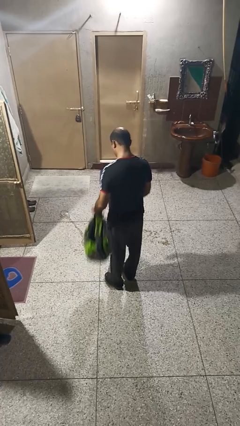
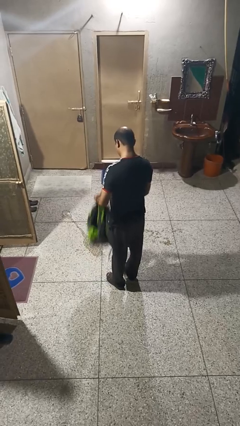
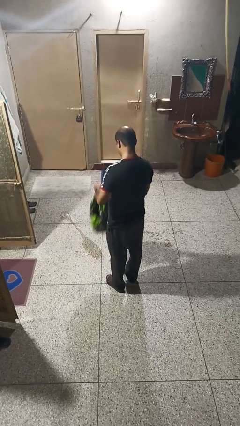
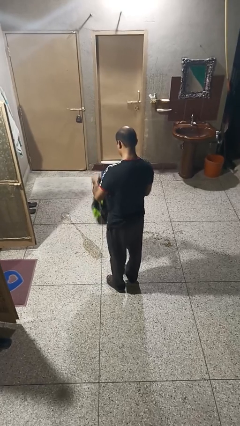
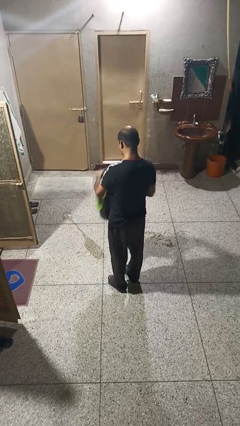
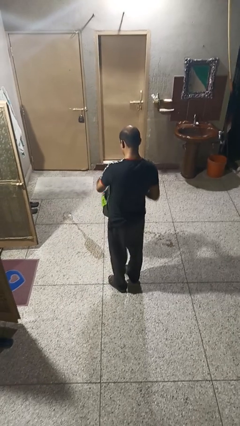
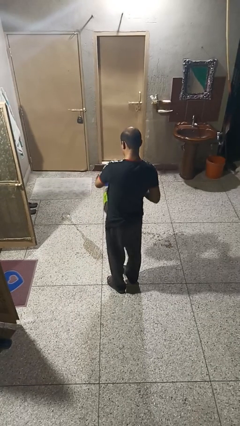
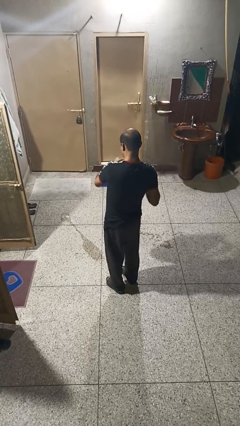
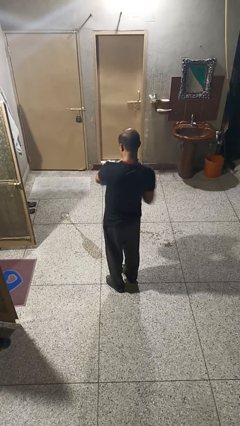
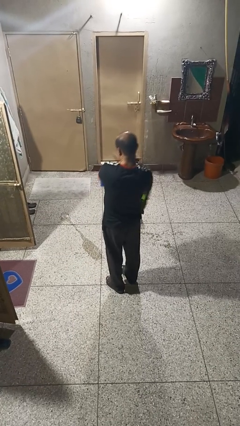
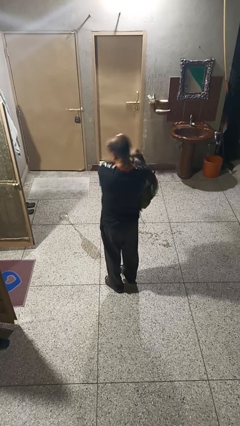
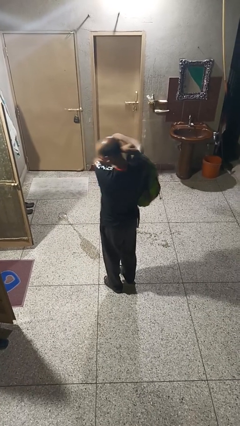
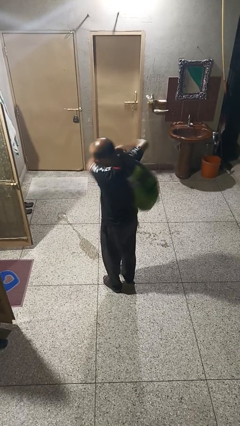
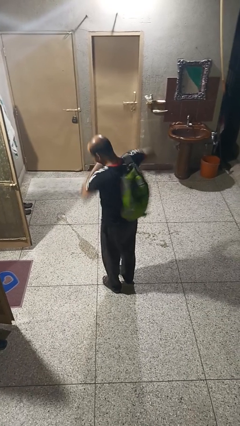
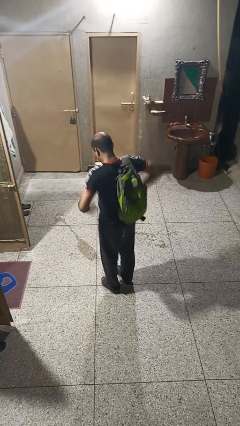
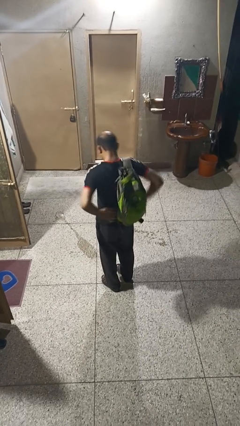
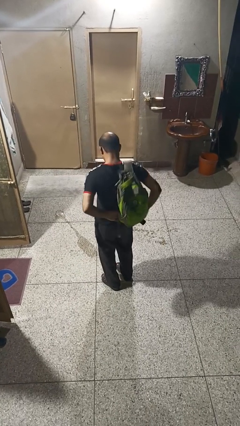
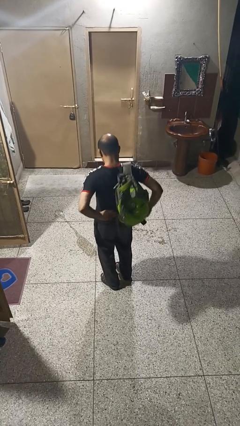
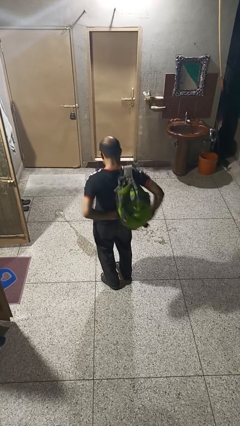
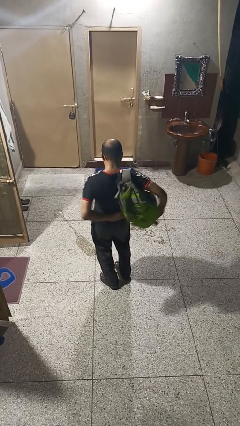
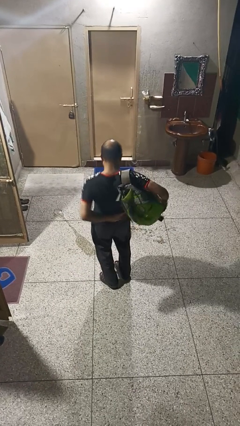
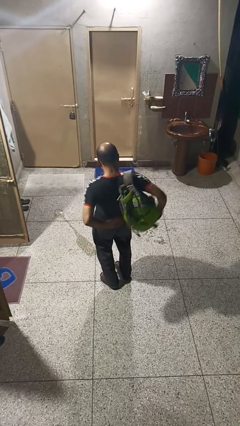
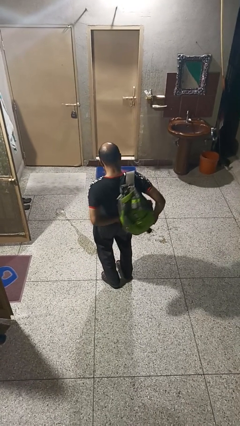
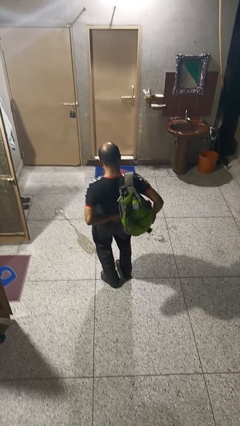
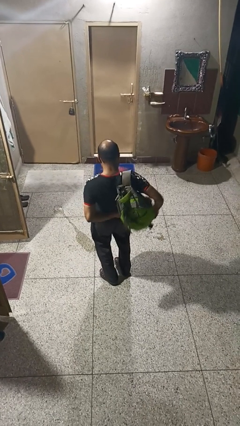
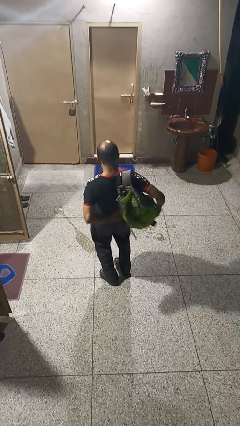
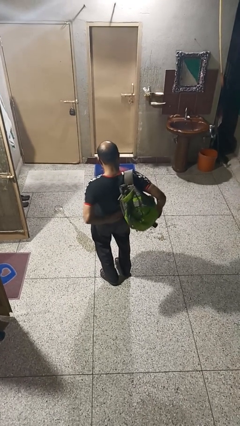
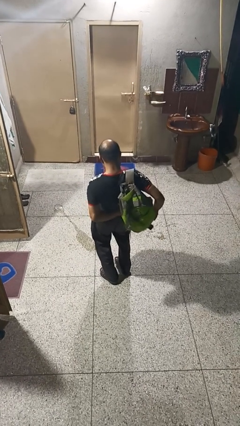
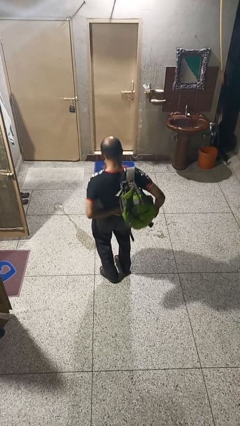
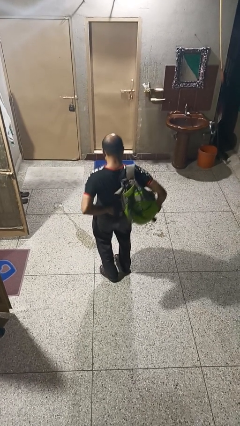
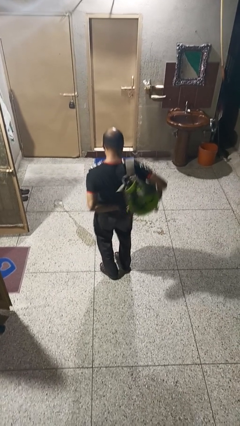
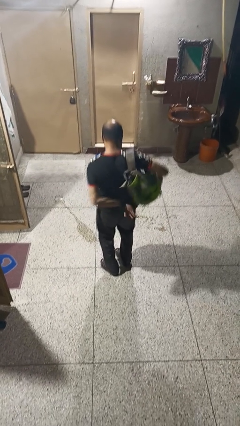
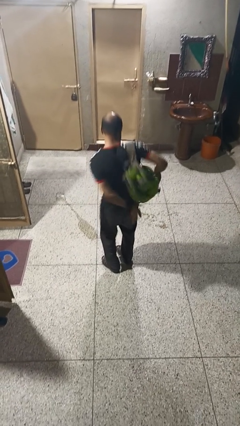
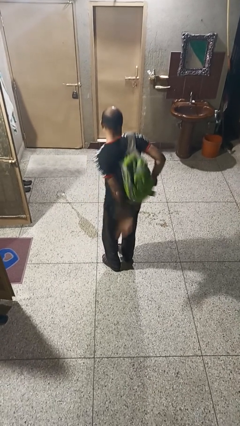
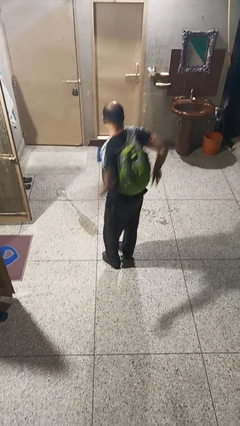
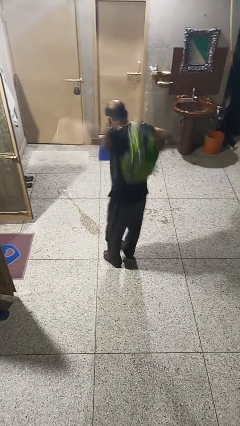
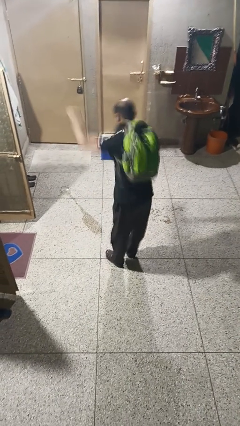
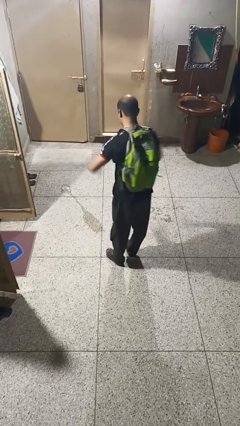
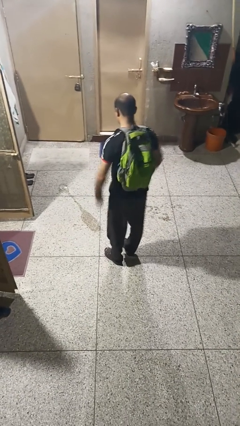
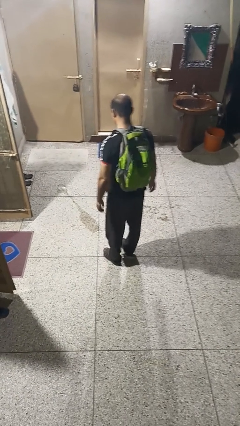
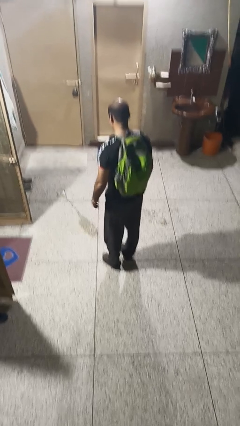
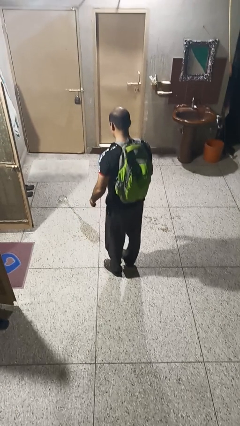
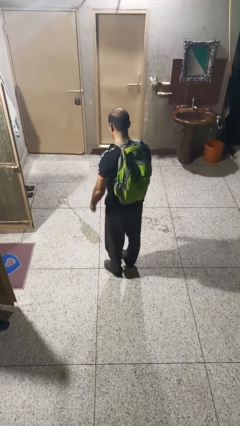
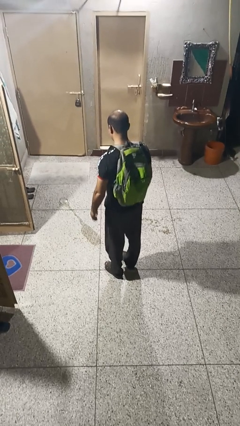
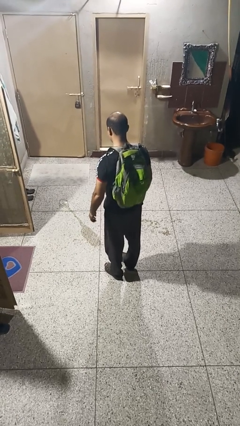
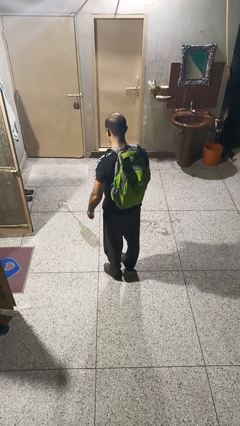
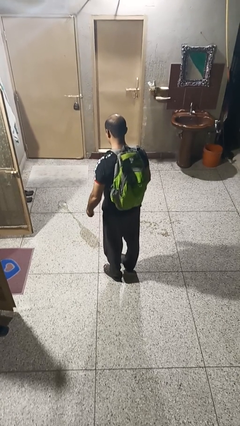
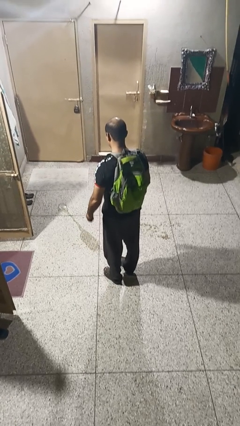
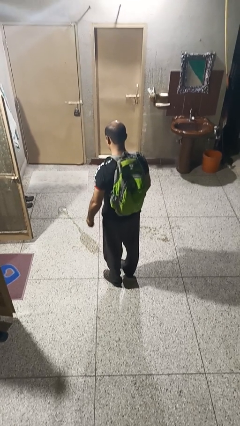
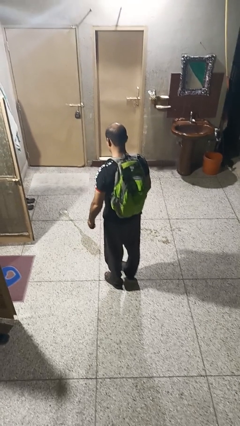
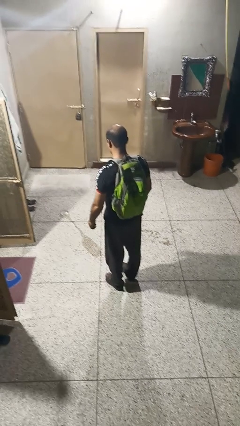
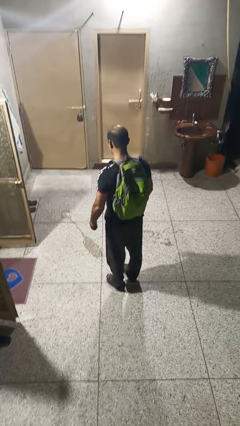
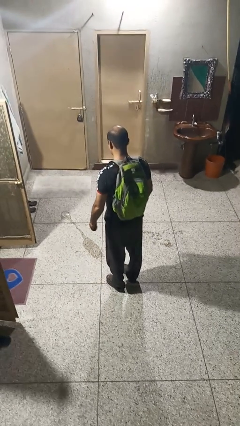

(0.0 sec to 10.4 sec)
person puts on backpack

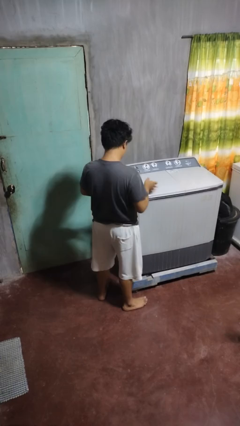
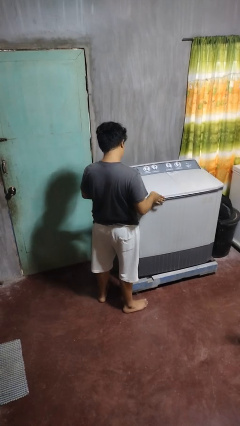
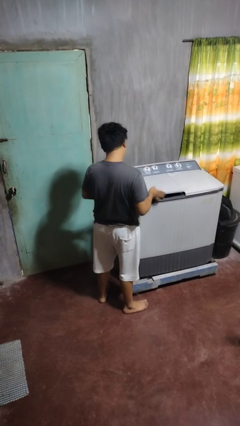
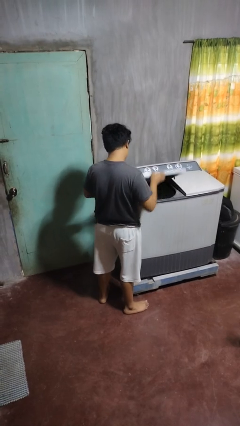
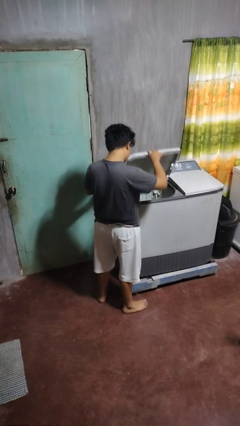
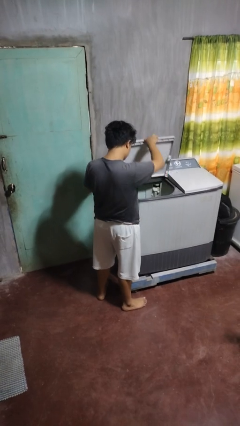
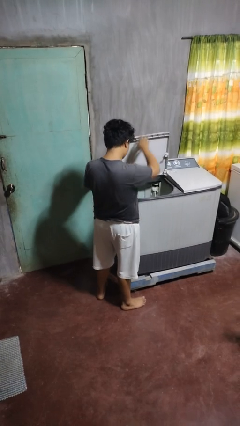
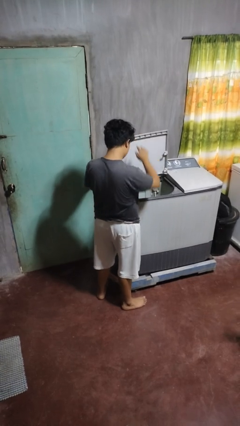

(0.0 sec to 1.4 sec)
person opens clothes washer

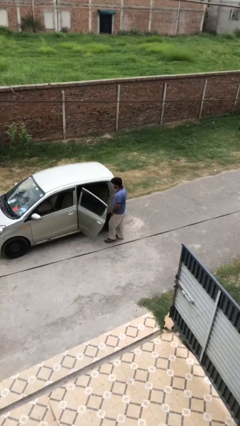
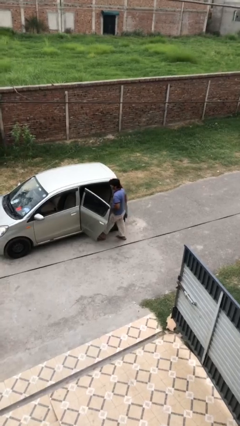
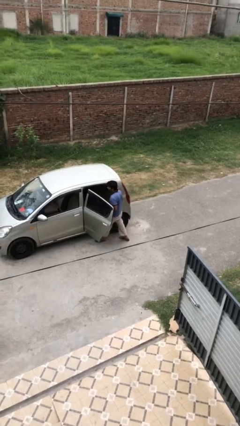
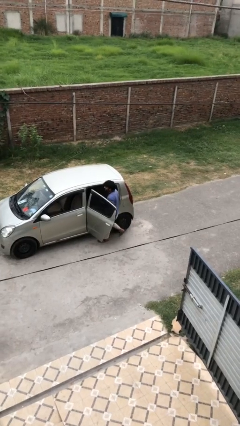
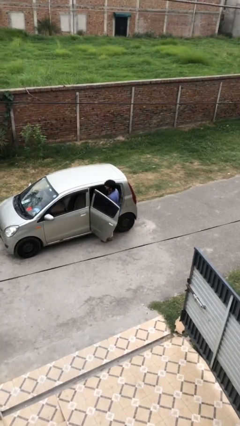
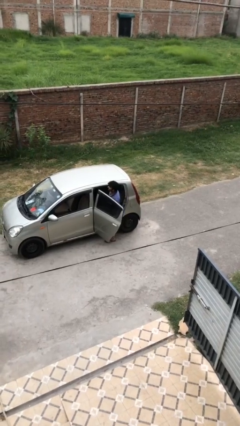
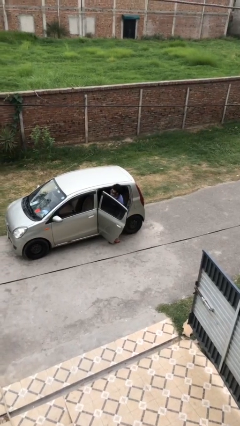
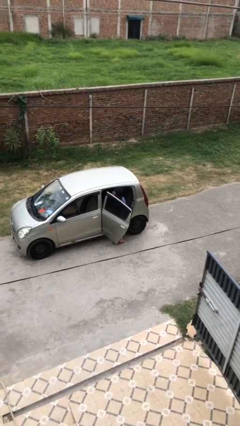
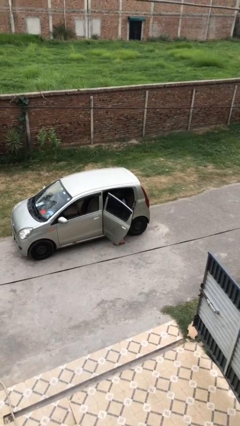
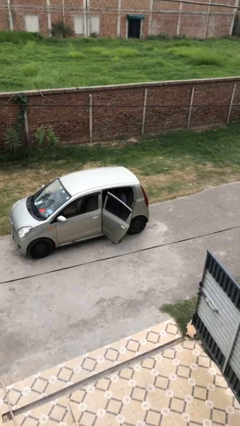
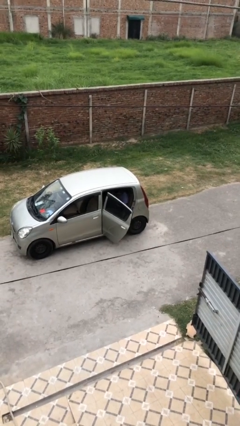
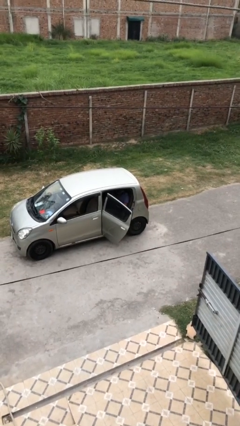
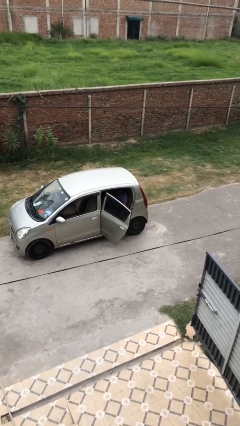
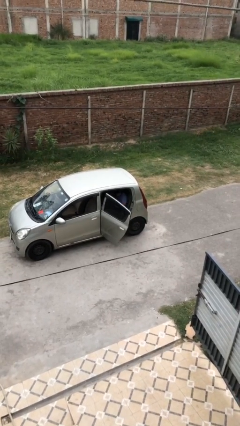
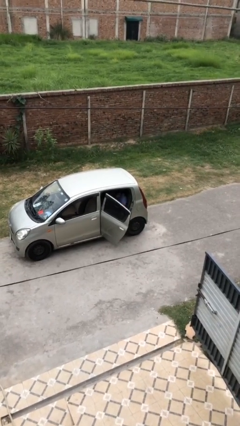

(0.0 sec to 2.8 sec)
person enters car

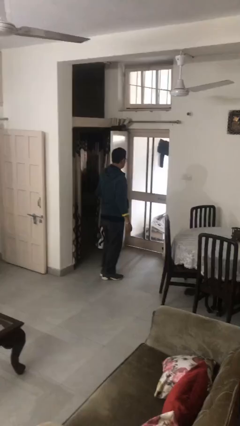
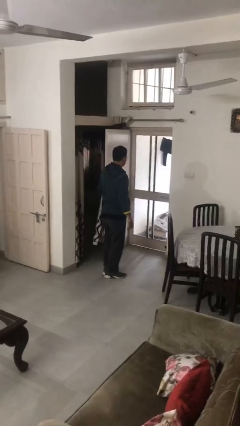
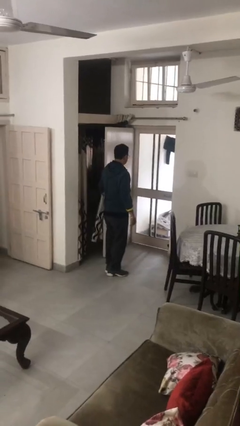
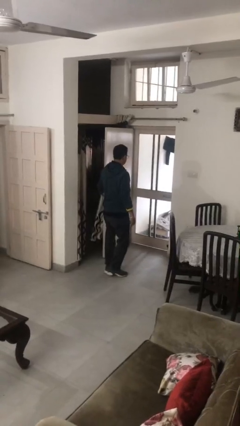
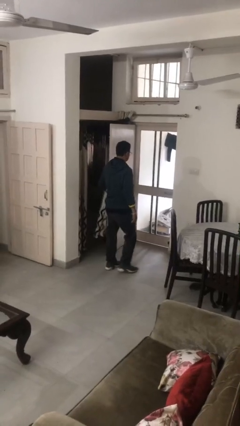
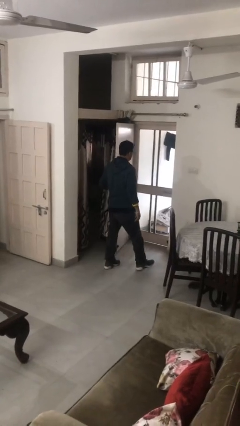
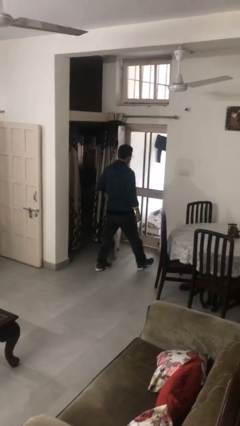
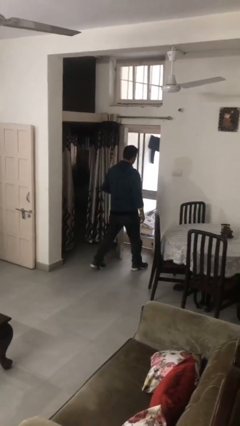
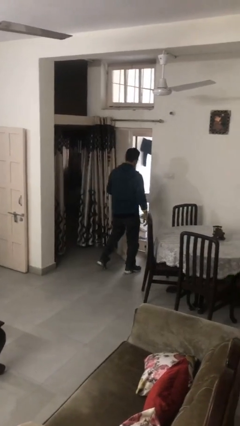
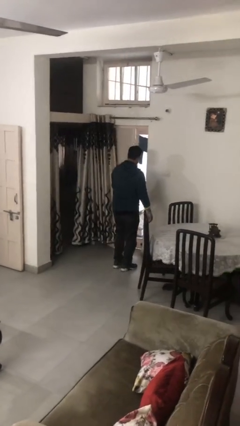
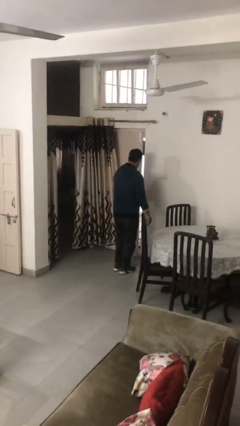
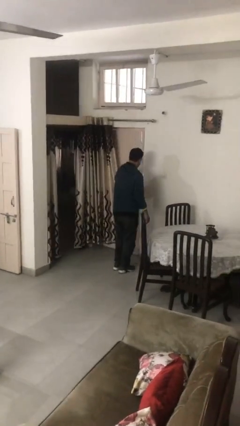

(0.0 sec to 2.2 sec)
person closes facility door

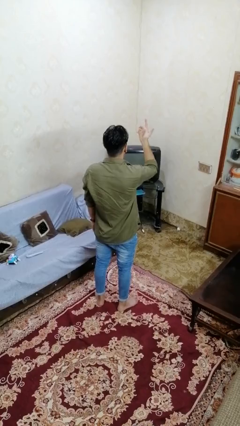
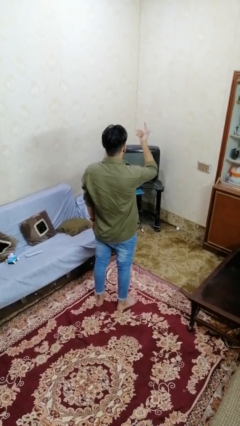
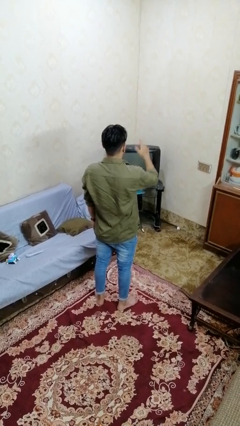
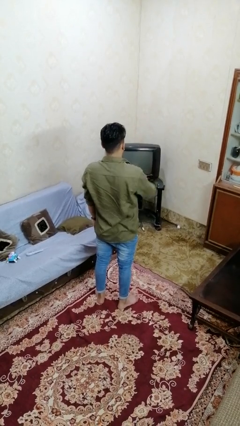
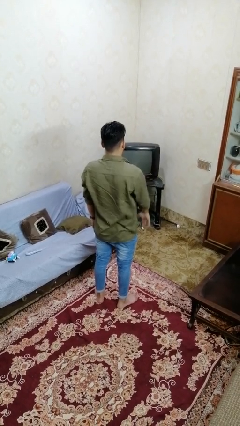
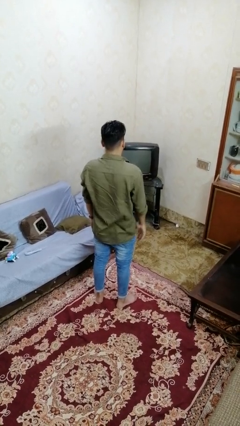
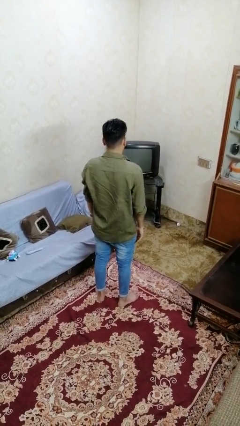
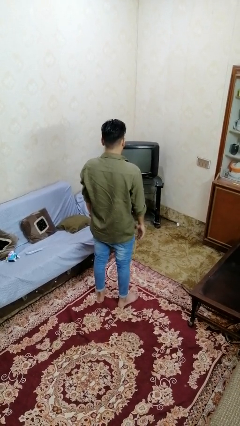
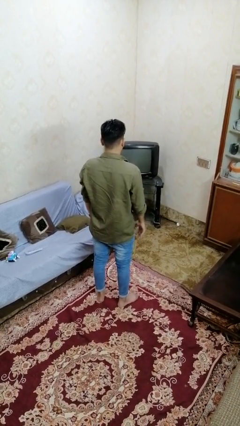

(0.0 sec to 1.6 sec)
person gestures lower hand
